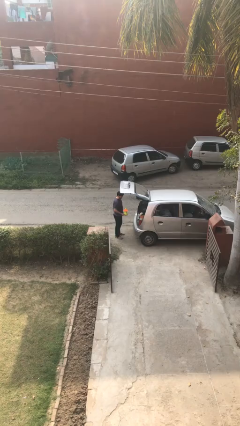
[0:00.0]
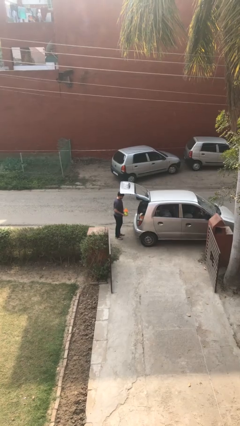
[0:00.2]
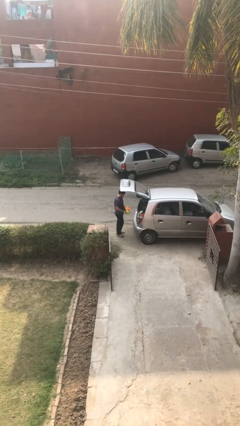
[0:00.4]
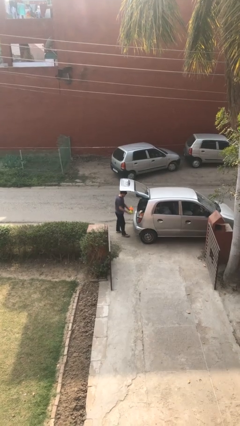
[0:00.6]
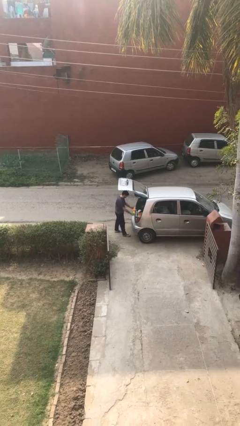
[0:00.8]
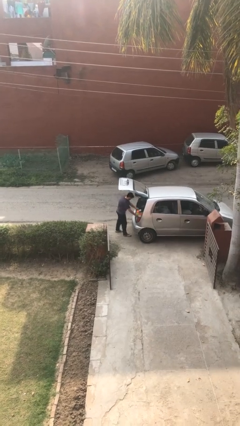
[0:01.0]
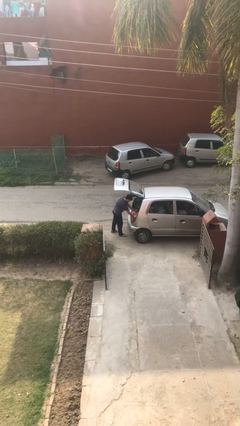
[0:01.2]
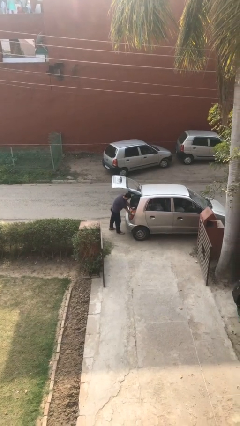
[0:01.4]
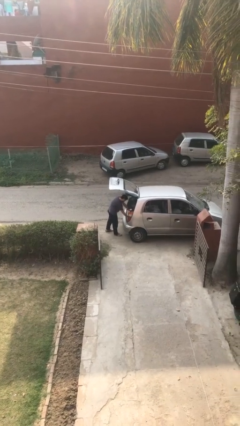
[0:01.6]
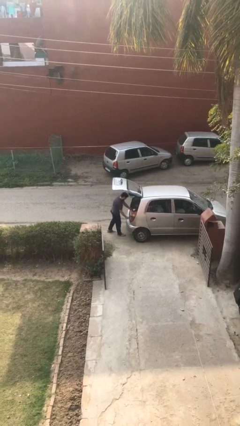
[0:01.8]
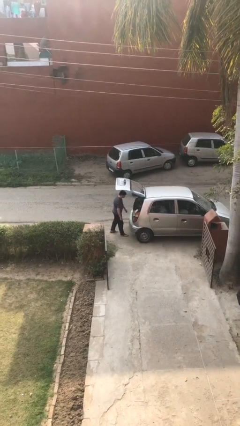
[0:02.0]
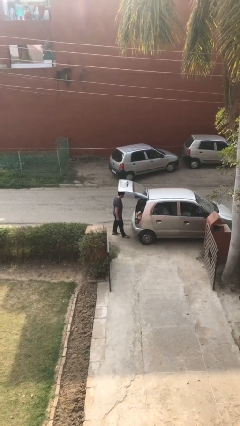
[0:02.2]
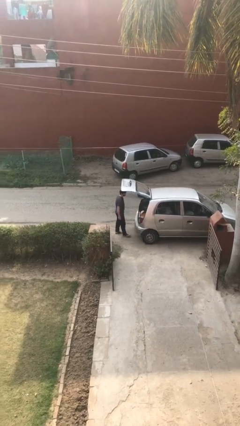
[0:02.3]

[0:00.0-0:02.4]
person loads car

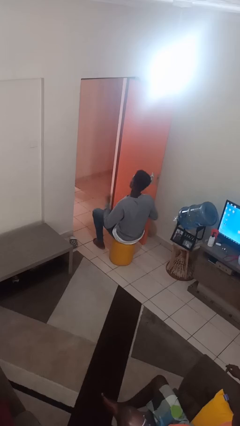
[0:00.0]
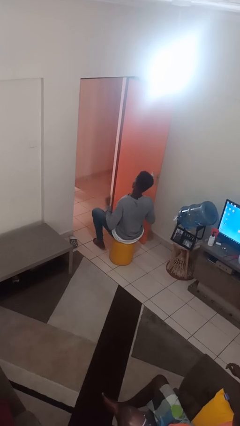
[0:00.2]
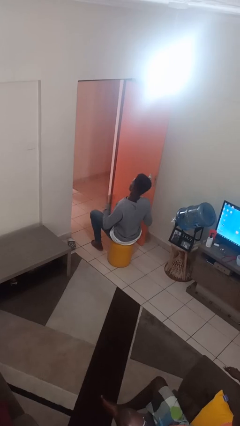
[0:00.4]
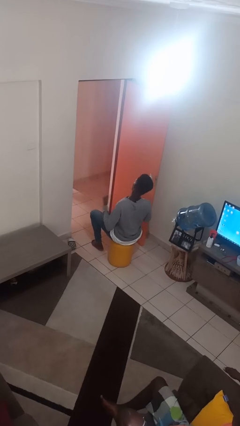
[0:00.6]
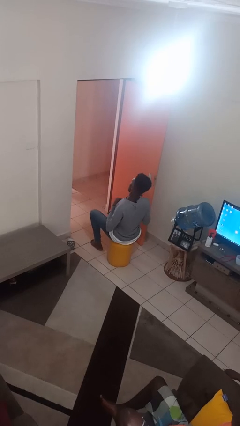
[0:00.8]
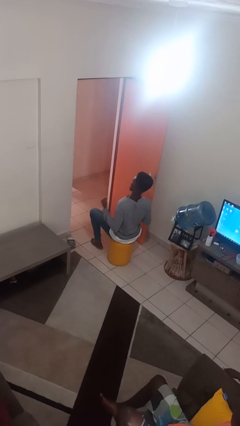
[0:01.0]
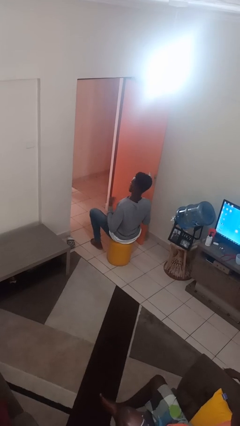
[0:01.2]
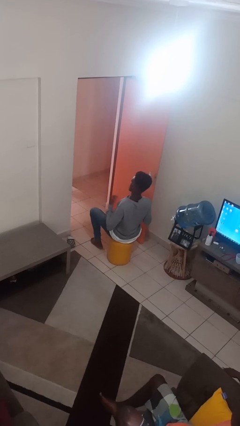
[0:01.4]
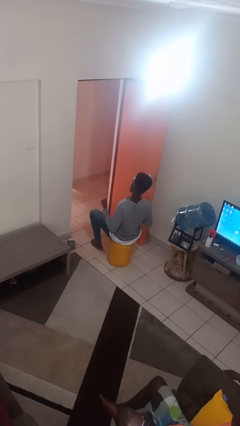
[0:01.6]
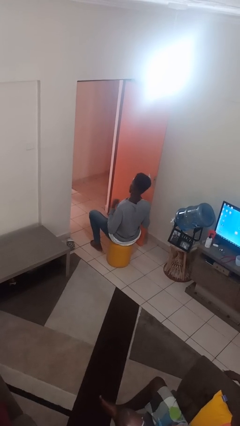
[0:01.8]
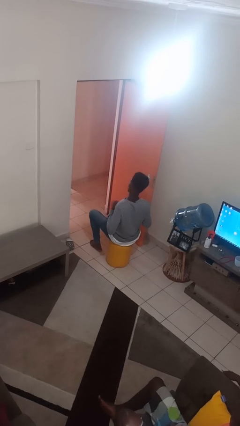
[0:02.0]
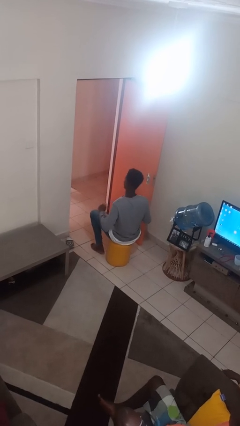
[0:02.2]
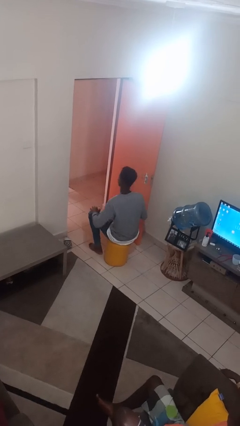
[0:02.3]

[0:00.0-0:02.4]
person drums on chest

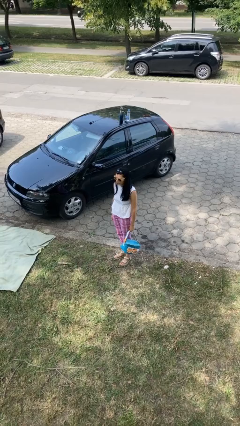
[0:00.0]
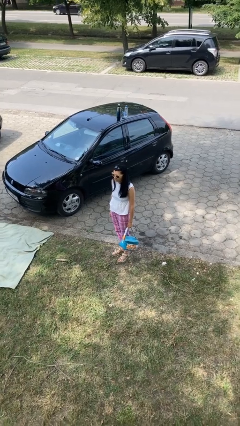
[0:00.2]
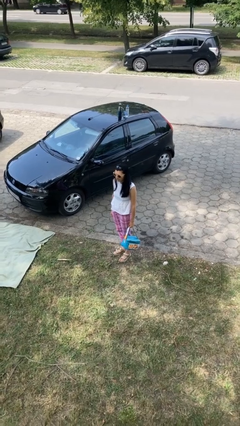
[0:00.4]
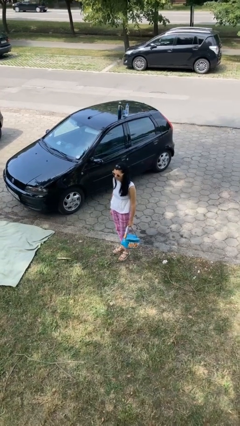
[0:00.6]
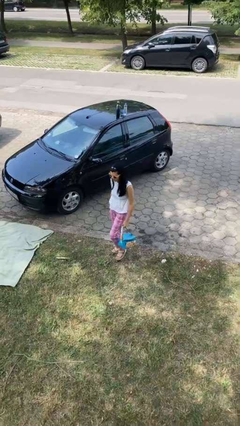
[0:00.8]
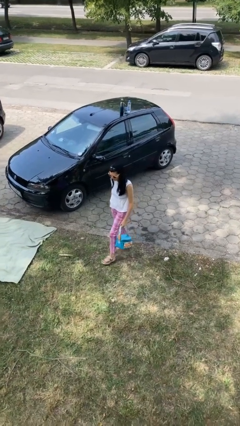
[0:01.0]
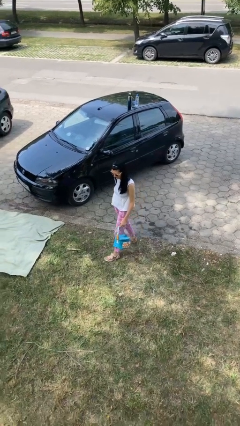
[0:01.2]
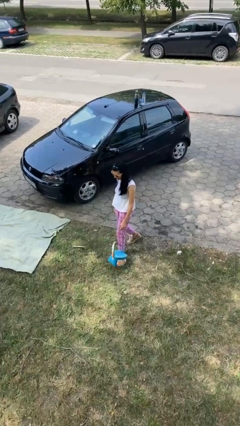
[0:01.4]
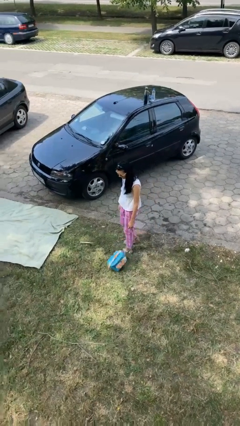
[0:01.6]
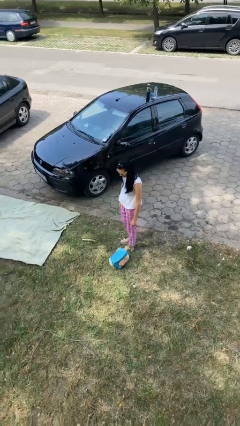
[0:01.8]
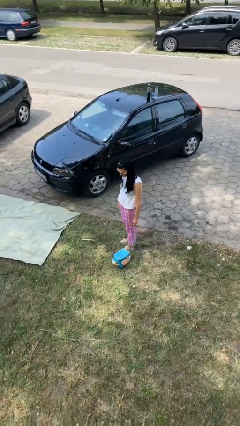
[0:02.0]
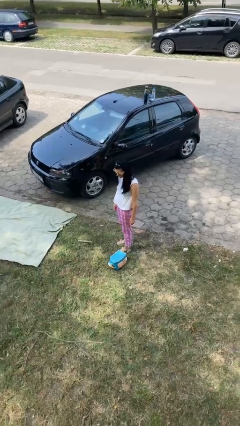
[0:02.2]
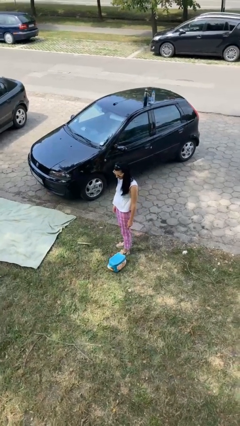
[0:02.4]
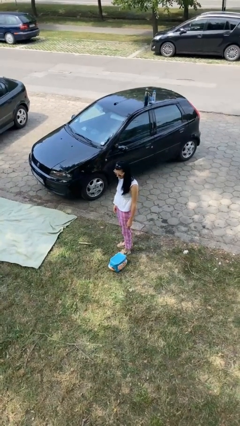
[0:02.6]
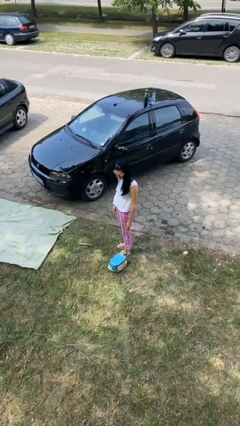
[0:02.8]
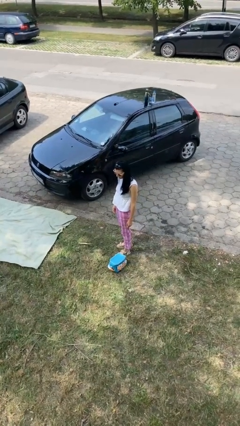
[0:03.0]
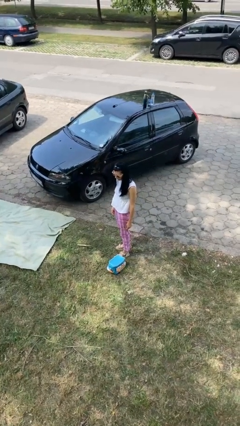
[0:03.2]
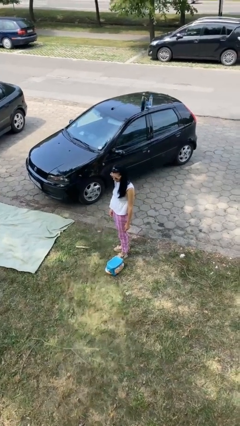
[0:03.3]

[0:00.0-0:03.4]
person drops object

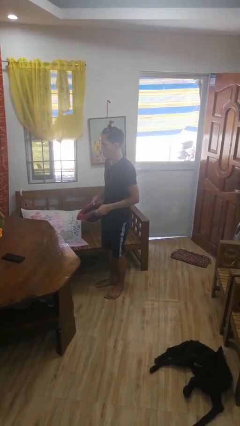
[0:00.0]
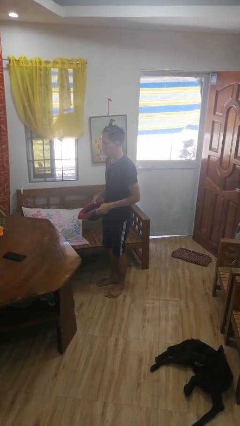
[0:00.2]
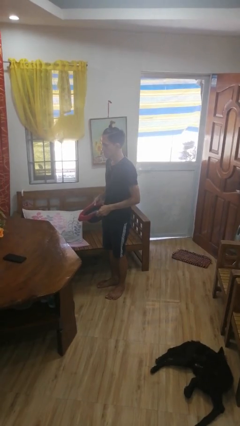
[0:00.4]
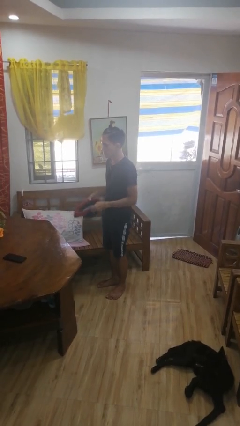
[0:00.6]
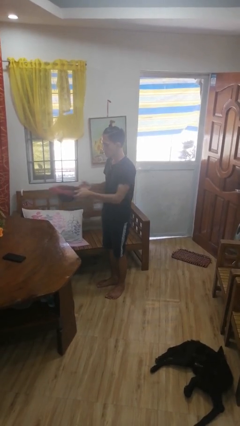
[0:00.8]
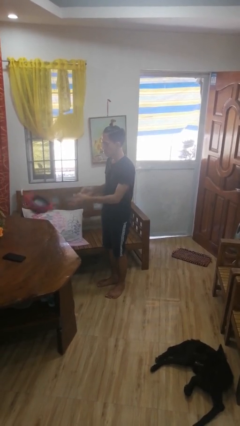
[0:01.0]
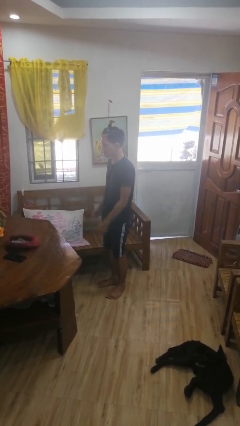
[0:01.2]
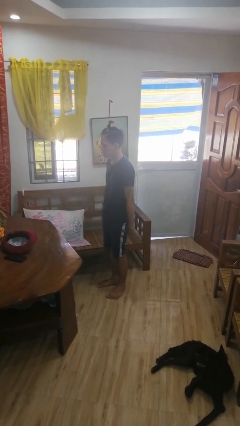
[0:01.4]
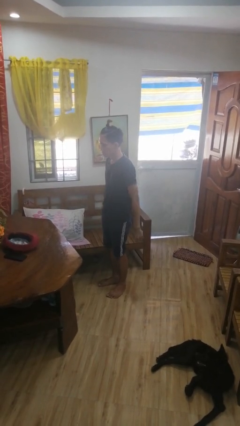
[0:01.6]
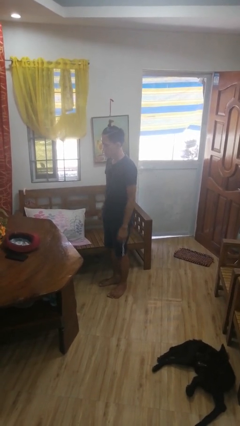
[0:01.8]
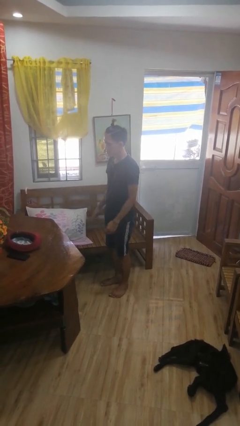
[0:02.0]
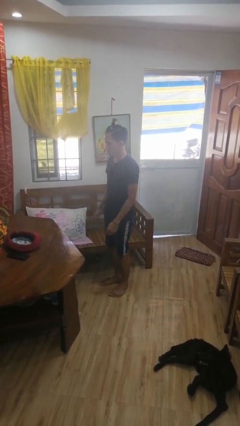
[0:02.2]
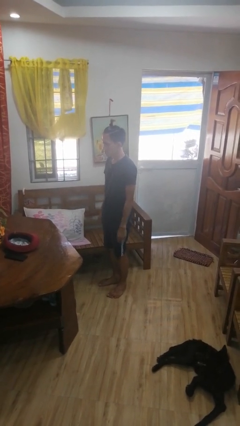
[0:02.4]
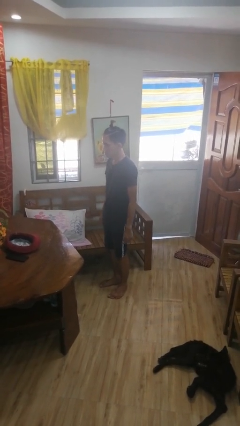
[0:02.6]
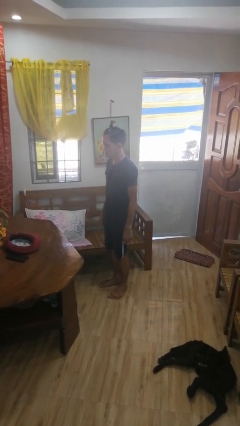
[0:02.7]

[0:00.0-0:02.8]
person throws object on table

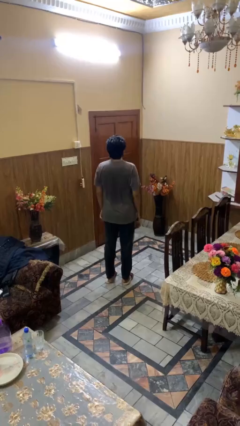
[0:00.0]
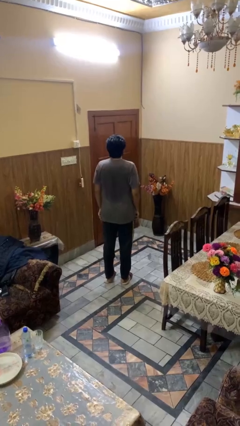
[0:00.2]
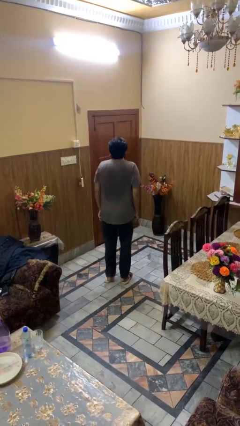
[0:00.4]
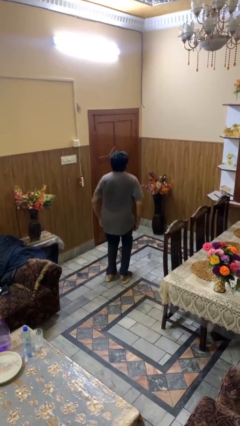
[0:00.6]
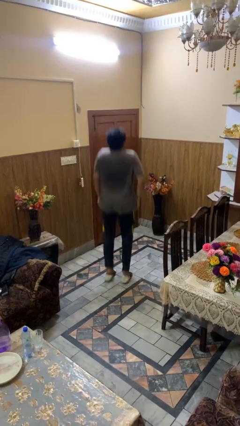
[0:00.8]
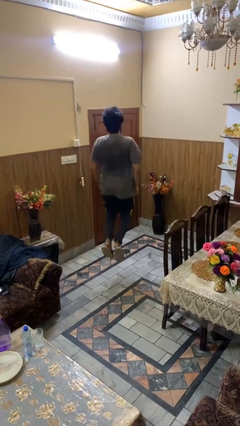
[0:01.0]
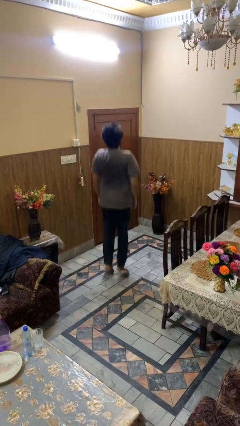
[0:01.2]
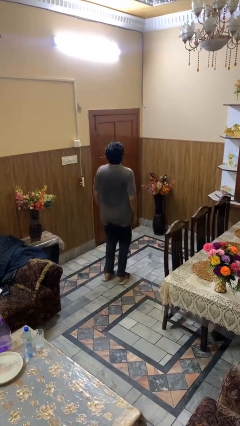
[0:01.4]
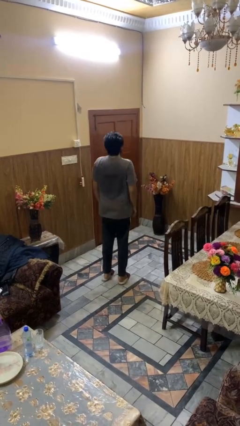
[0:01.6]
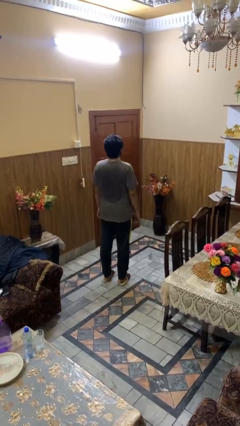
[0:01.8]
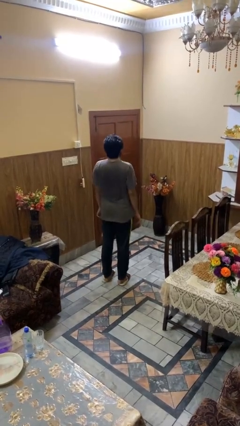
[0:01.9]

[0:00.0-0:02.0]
person jumps

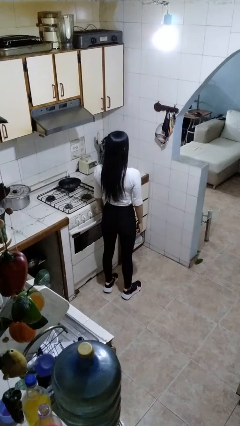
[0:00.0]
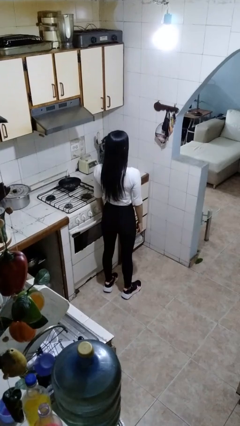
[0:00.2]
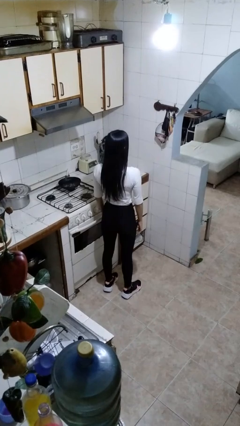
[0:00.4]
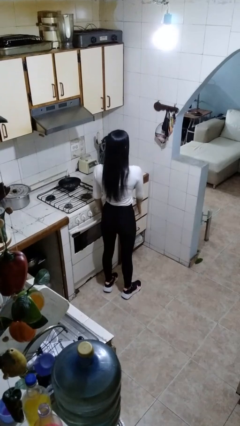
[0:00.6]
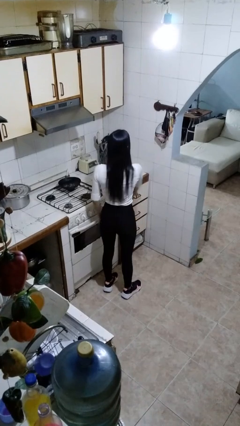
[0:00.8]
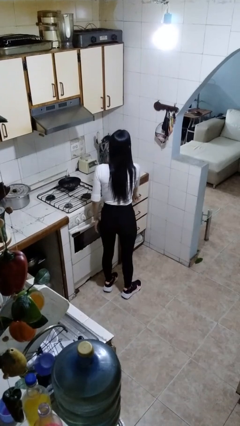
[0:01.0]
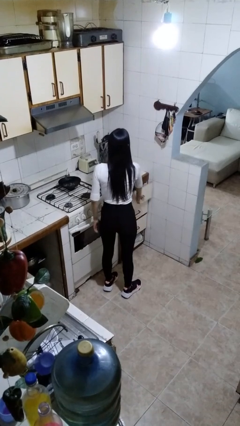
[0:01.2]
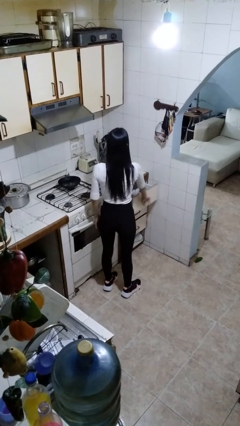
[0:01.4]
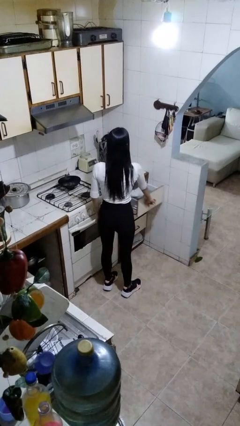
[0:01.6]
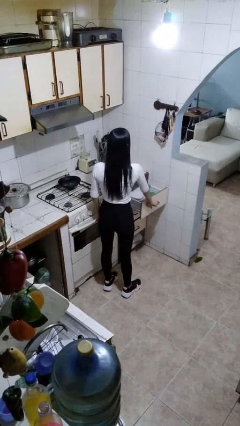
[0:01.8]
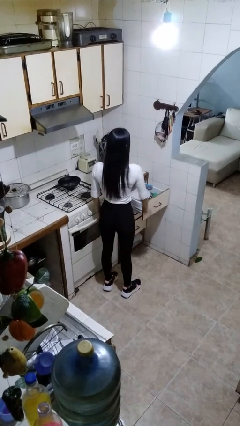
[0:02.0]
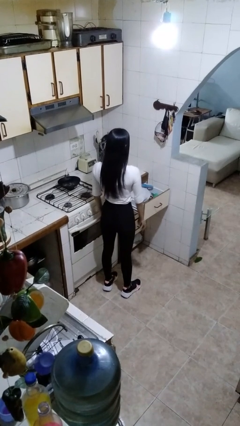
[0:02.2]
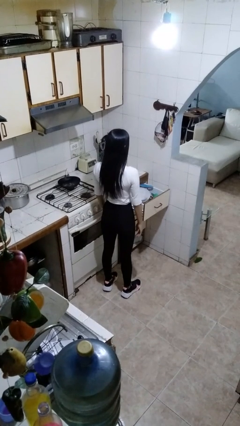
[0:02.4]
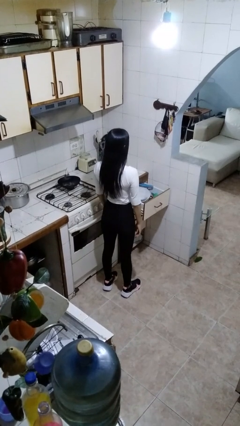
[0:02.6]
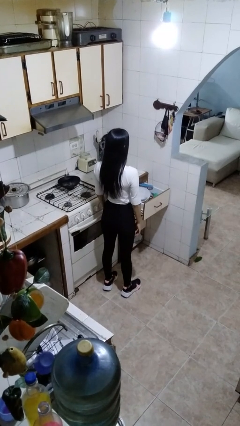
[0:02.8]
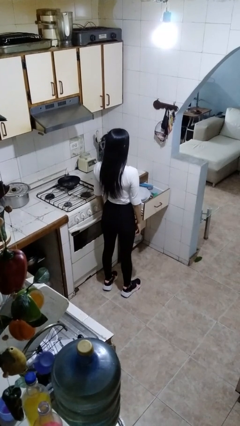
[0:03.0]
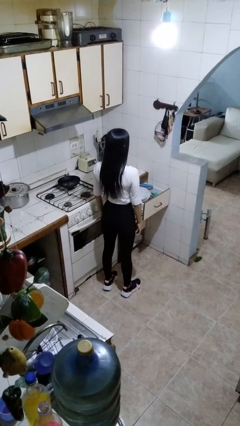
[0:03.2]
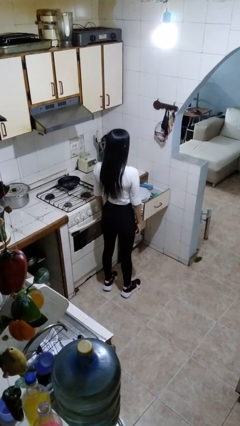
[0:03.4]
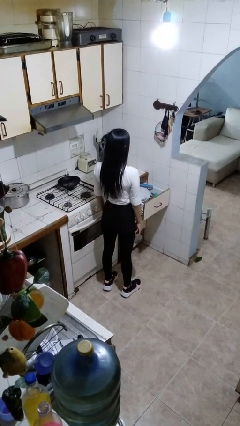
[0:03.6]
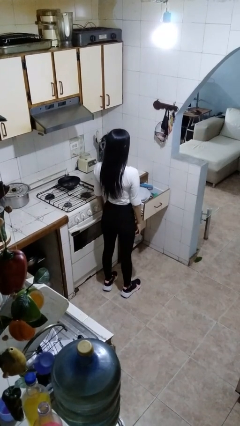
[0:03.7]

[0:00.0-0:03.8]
person opens kitchen drawer

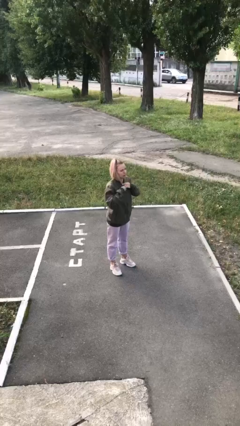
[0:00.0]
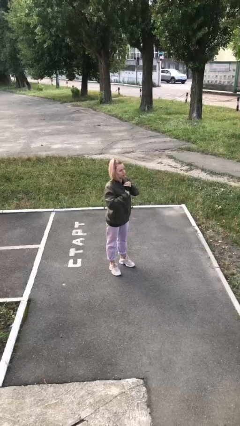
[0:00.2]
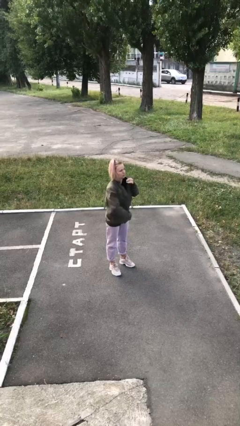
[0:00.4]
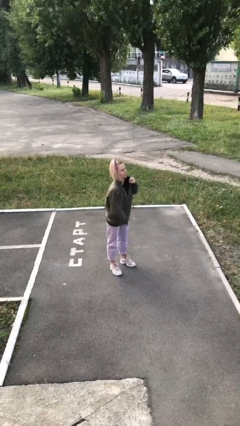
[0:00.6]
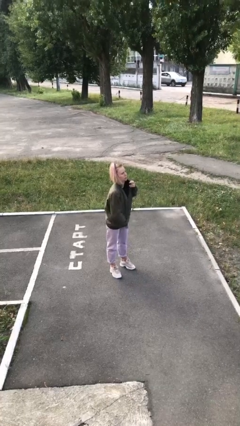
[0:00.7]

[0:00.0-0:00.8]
person unzips jacket
